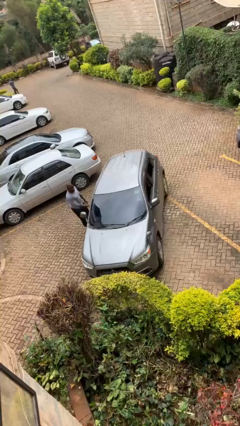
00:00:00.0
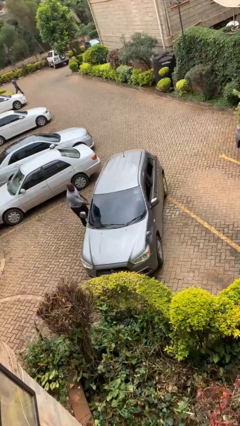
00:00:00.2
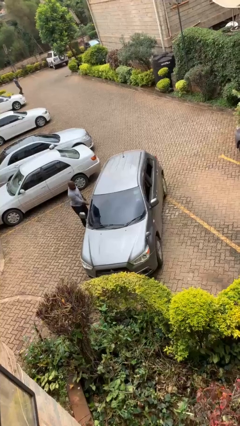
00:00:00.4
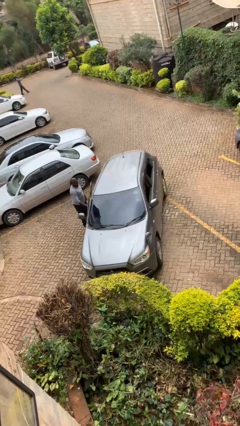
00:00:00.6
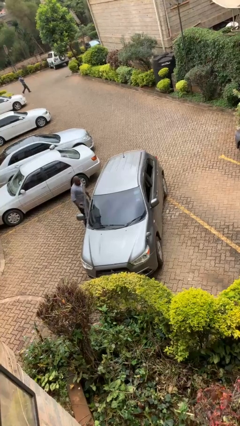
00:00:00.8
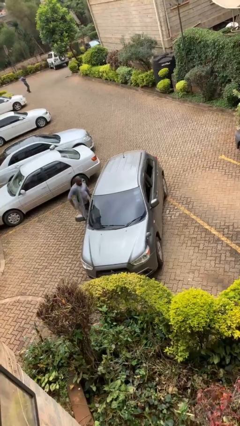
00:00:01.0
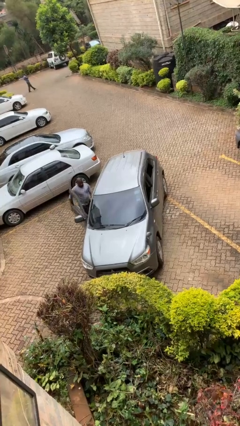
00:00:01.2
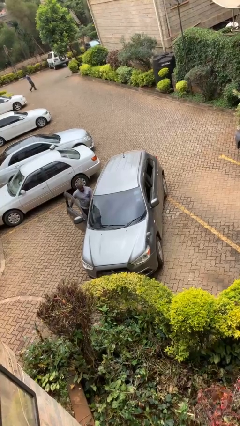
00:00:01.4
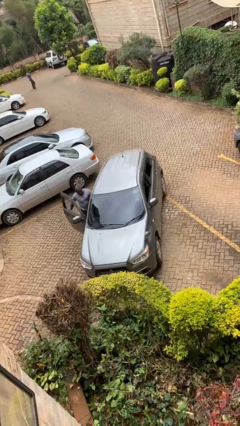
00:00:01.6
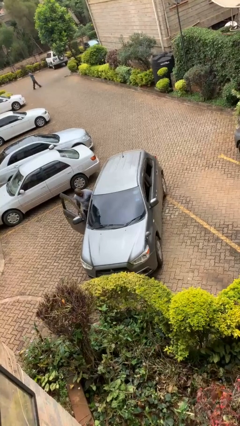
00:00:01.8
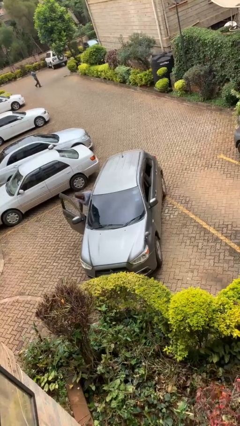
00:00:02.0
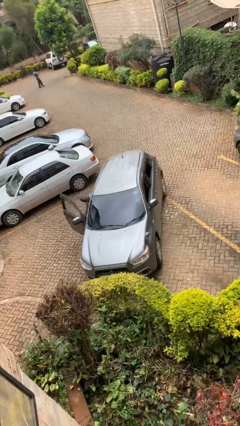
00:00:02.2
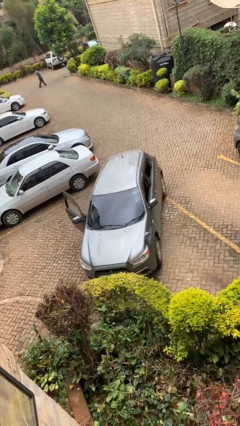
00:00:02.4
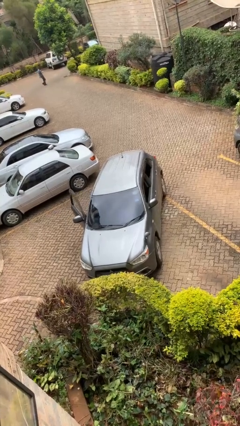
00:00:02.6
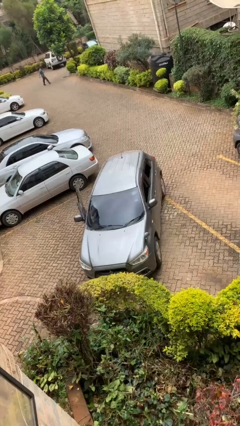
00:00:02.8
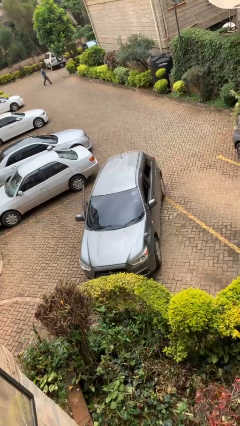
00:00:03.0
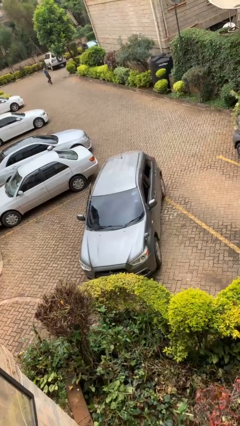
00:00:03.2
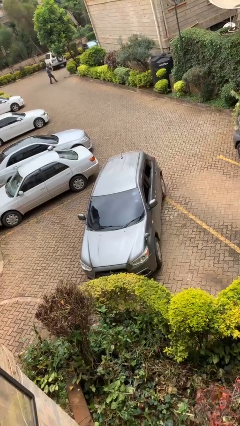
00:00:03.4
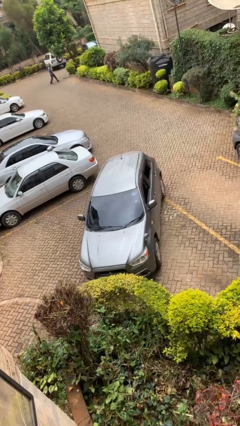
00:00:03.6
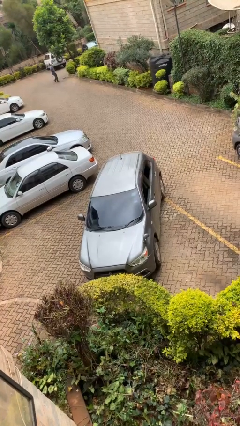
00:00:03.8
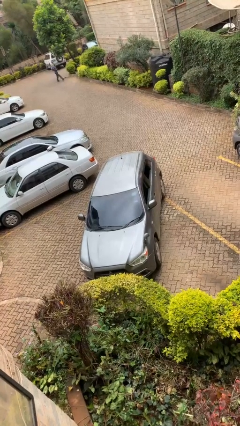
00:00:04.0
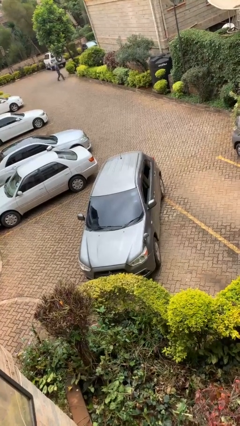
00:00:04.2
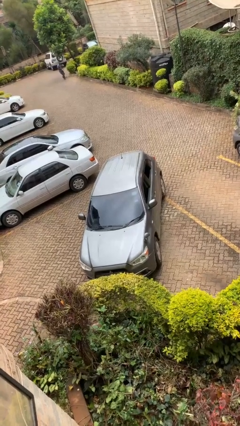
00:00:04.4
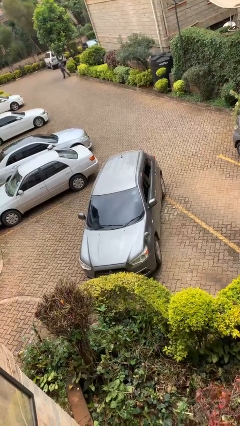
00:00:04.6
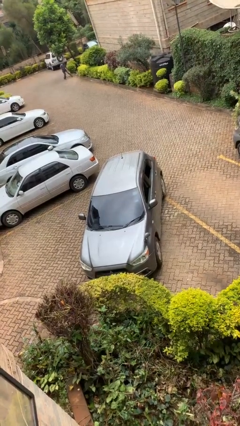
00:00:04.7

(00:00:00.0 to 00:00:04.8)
car picks up person

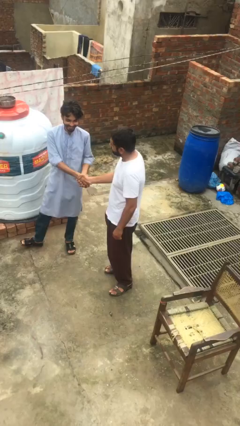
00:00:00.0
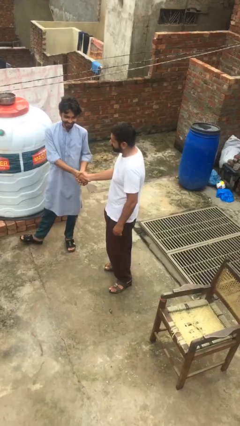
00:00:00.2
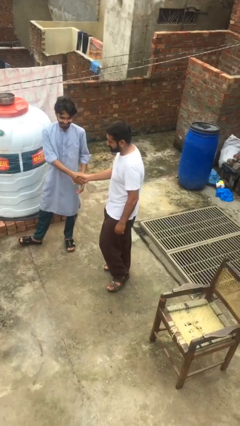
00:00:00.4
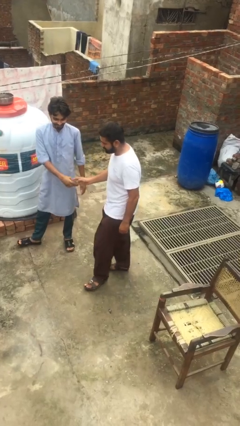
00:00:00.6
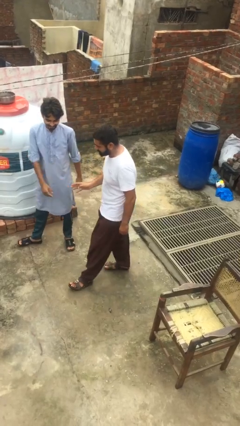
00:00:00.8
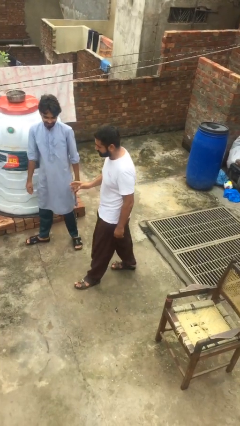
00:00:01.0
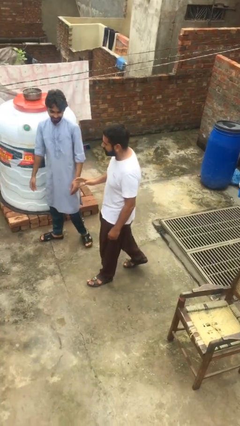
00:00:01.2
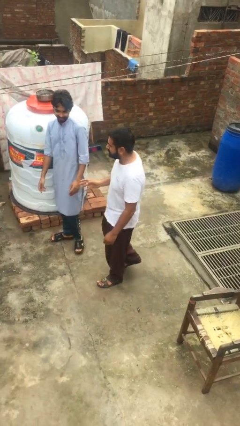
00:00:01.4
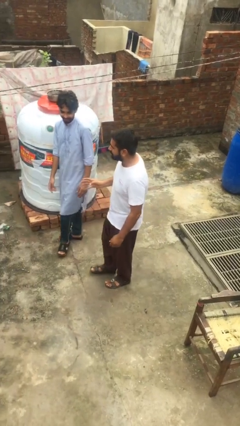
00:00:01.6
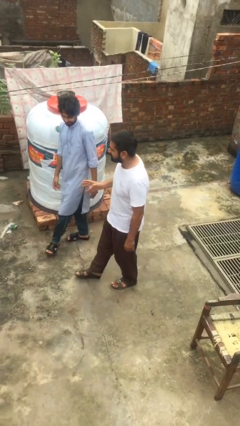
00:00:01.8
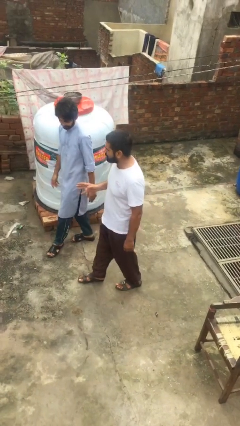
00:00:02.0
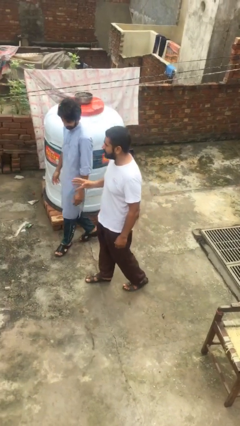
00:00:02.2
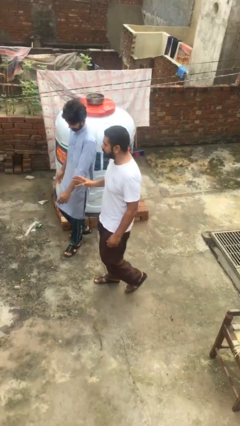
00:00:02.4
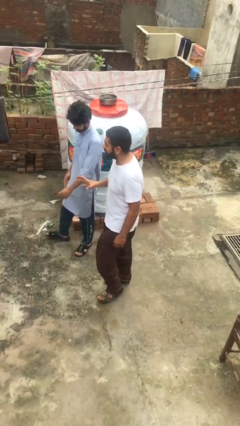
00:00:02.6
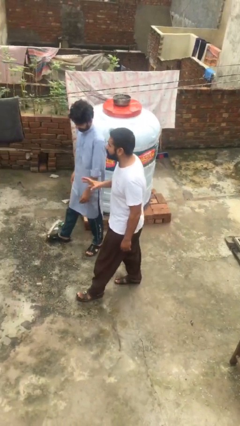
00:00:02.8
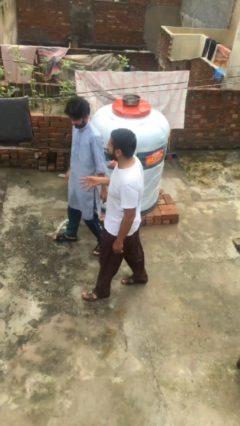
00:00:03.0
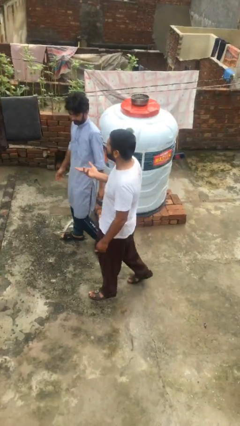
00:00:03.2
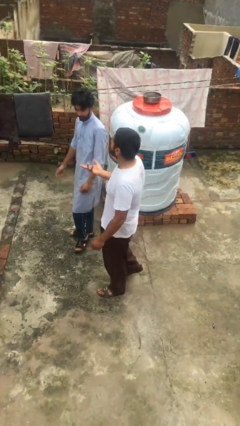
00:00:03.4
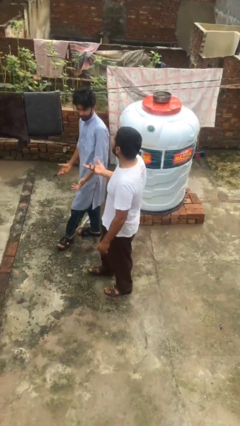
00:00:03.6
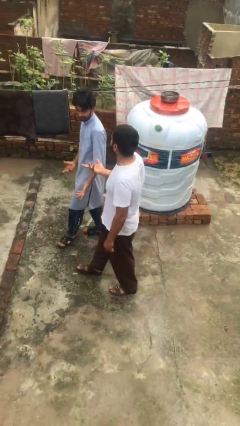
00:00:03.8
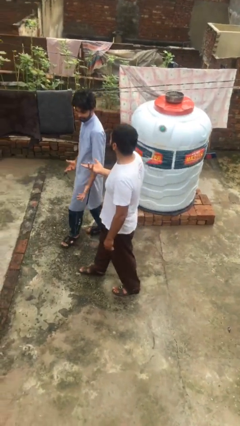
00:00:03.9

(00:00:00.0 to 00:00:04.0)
person talks to person

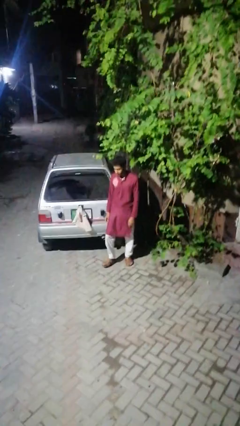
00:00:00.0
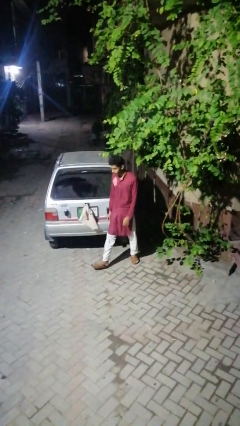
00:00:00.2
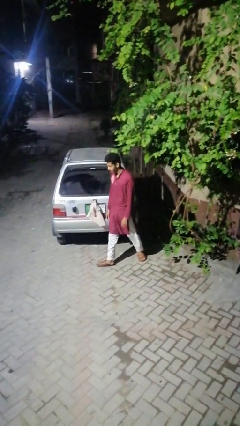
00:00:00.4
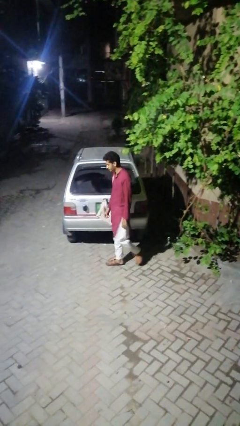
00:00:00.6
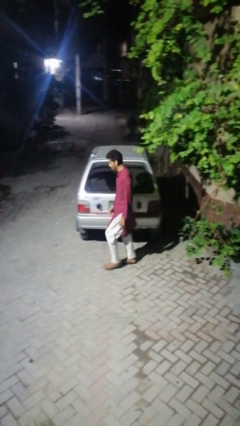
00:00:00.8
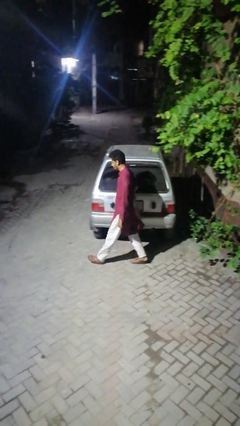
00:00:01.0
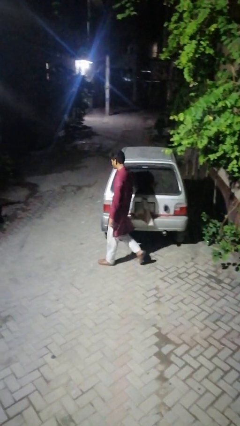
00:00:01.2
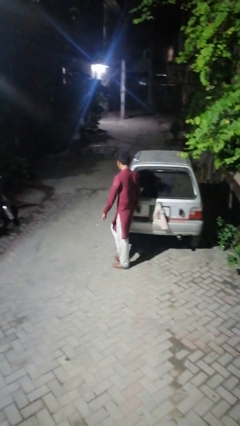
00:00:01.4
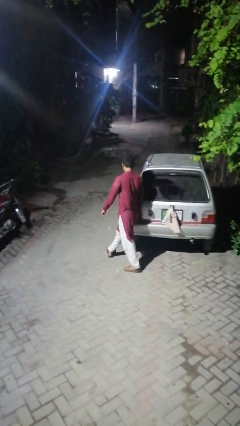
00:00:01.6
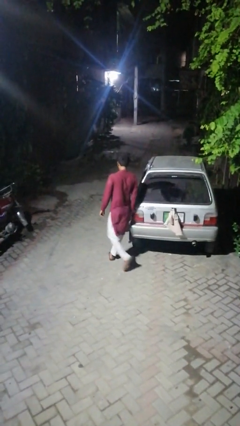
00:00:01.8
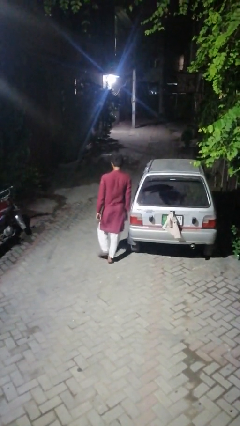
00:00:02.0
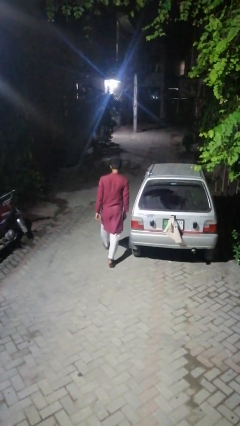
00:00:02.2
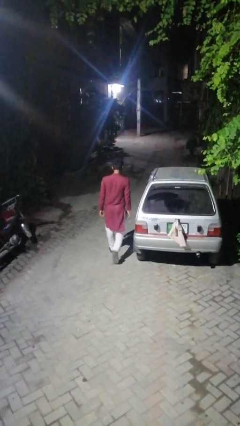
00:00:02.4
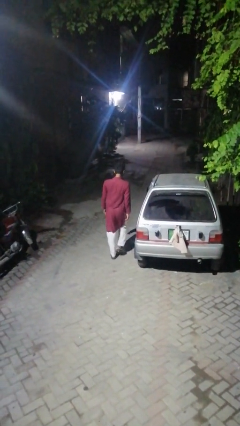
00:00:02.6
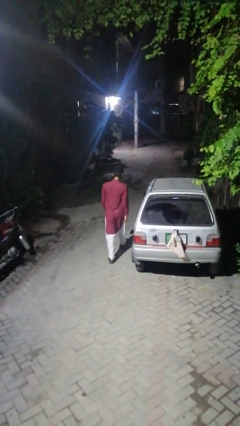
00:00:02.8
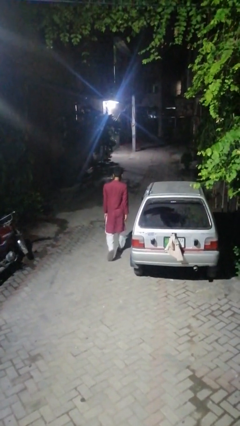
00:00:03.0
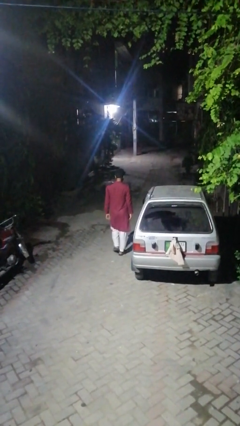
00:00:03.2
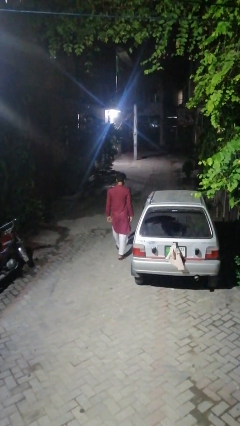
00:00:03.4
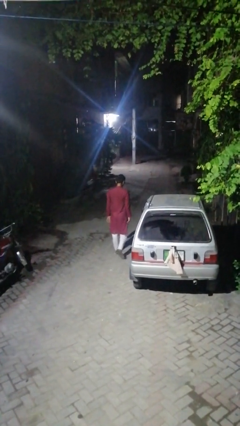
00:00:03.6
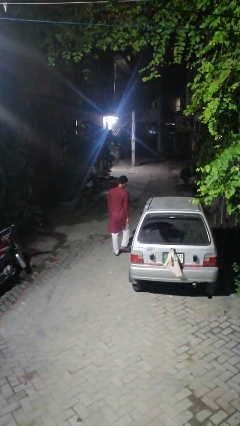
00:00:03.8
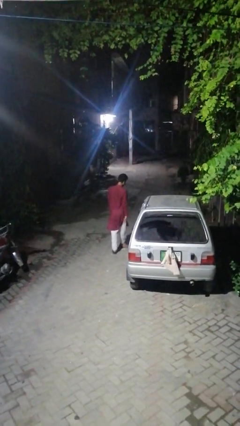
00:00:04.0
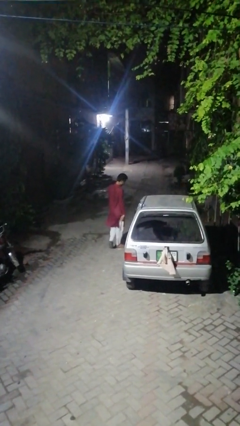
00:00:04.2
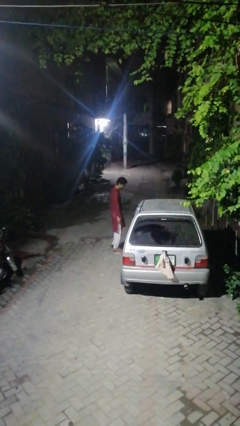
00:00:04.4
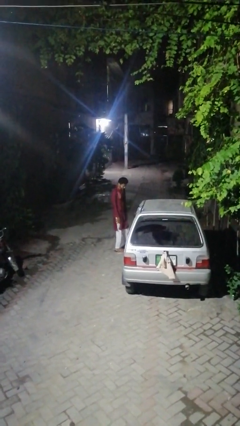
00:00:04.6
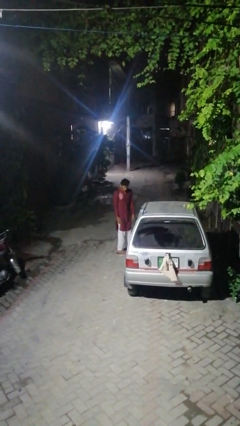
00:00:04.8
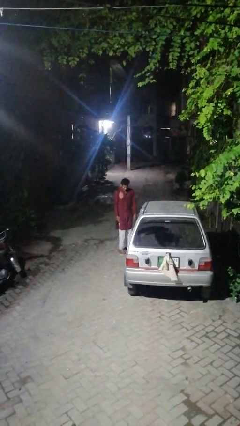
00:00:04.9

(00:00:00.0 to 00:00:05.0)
person walks around car

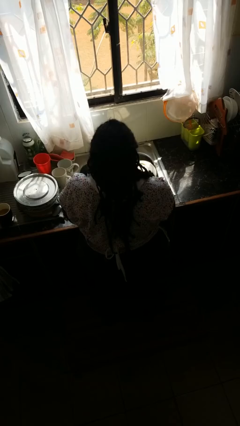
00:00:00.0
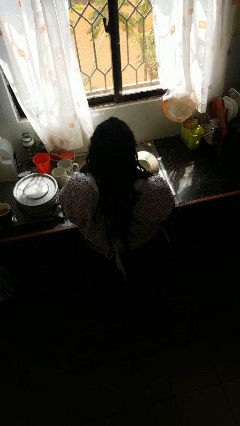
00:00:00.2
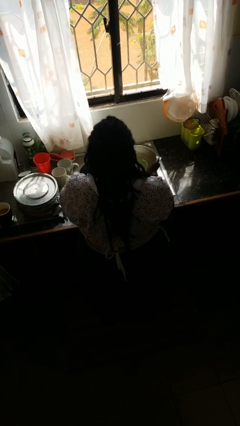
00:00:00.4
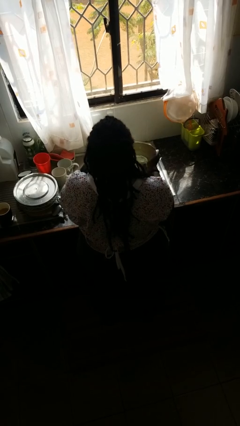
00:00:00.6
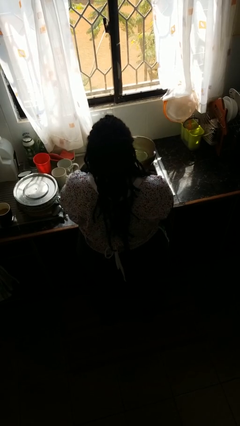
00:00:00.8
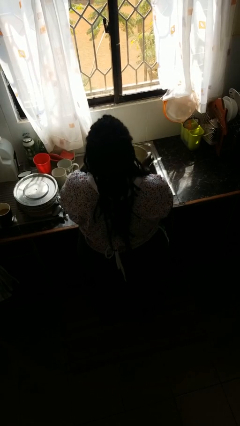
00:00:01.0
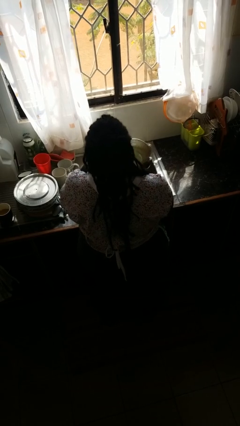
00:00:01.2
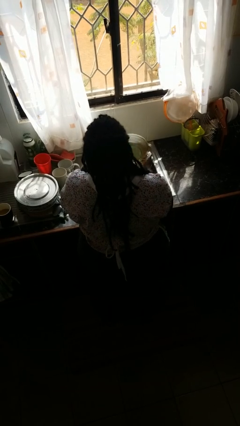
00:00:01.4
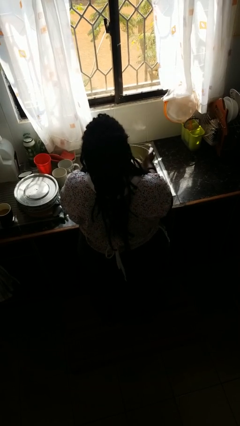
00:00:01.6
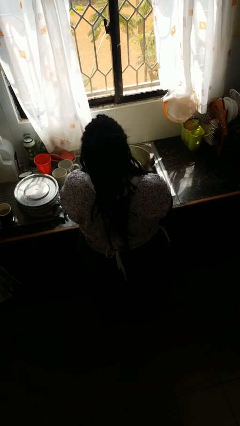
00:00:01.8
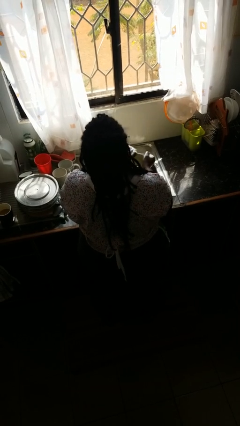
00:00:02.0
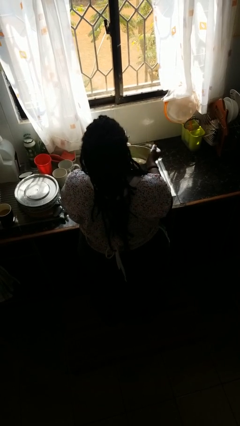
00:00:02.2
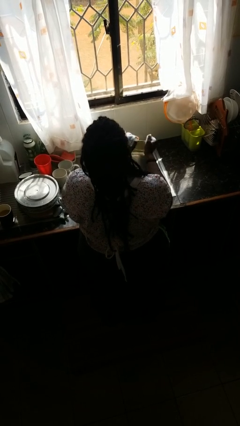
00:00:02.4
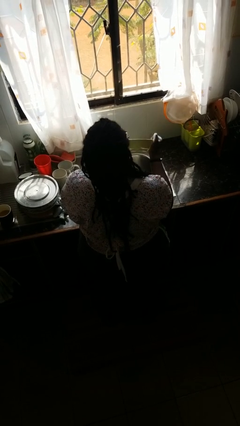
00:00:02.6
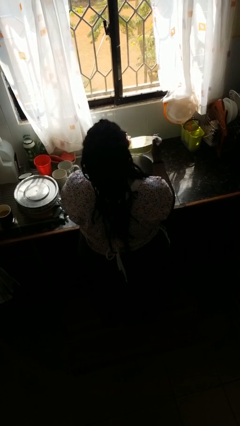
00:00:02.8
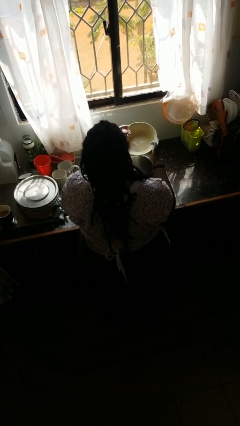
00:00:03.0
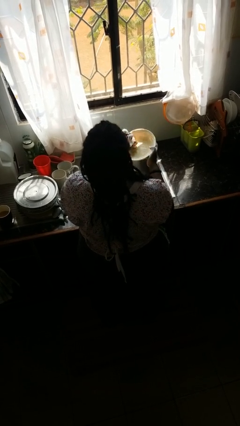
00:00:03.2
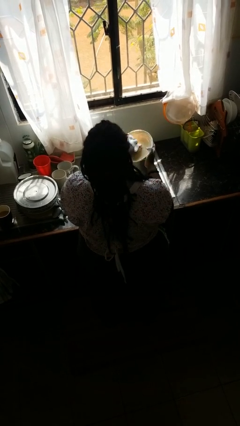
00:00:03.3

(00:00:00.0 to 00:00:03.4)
person washes dish

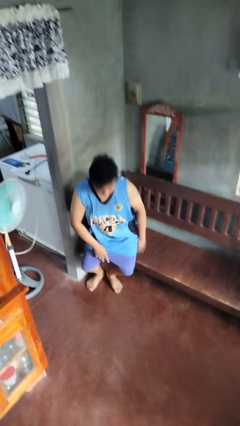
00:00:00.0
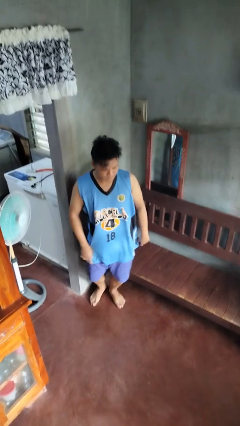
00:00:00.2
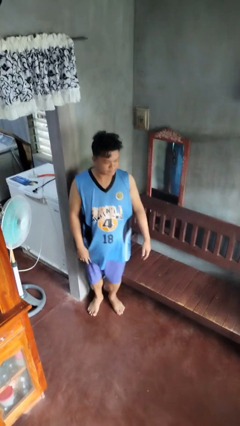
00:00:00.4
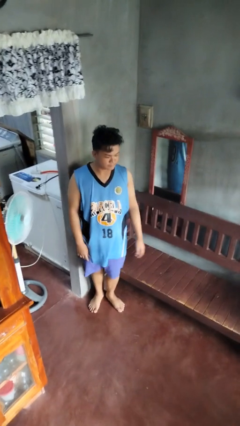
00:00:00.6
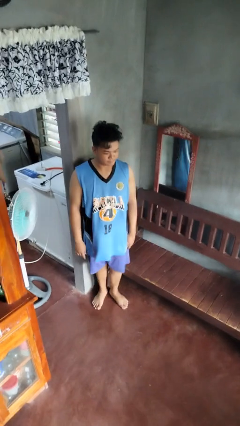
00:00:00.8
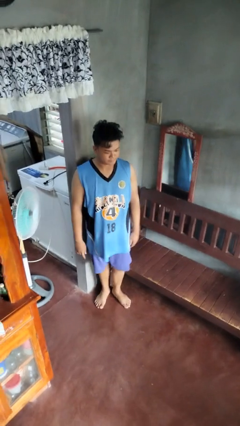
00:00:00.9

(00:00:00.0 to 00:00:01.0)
person stands up
